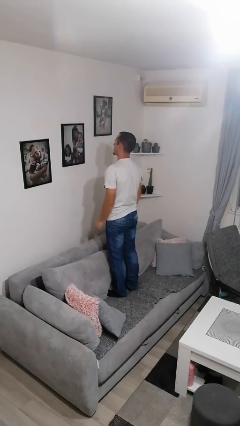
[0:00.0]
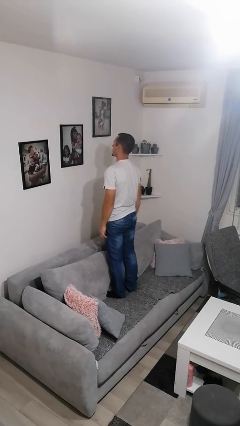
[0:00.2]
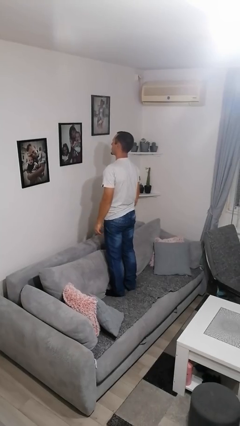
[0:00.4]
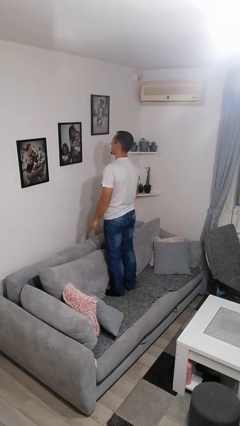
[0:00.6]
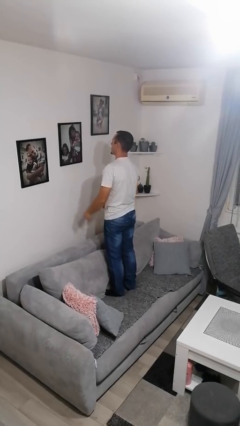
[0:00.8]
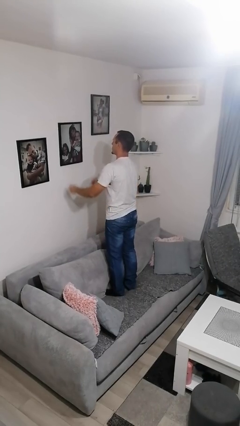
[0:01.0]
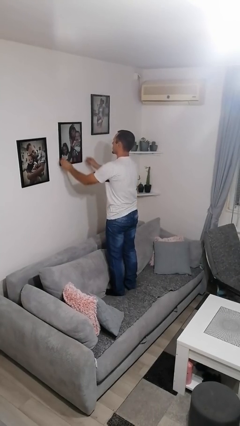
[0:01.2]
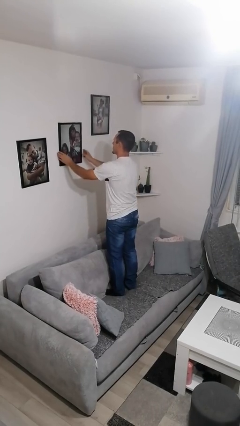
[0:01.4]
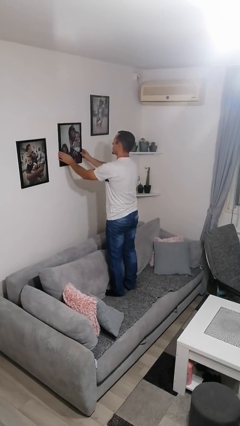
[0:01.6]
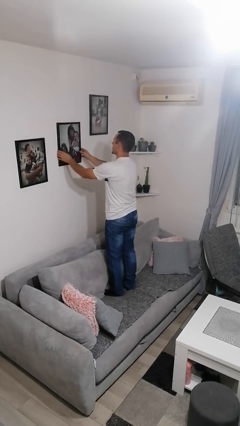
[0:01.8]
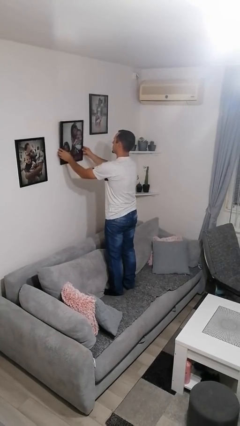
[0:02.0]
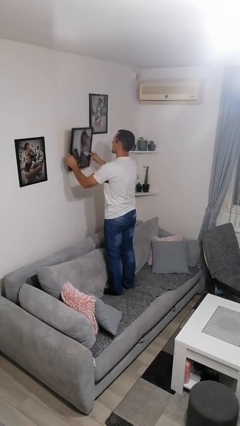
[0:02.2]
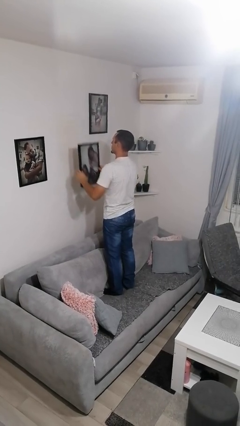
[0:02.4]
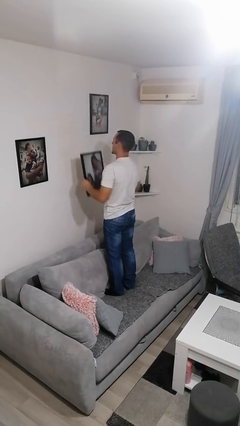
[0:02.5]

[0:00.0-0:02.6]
person takes down picture frame

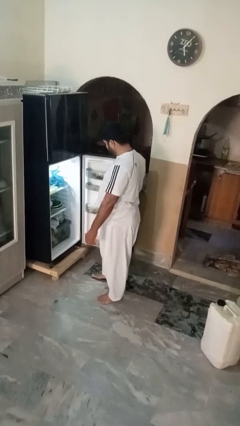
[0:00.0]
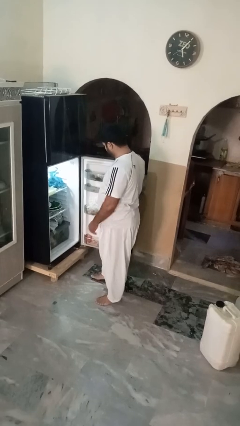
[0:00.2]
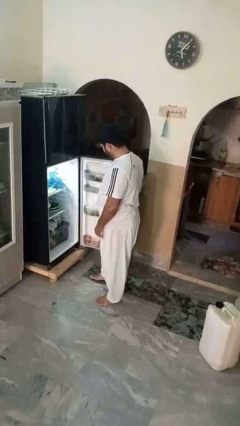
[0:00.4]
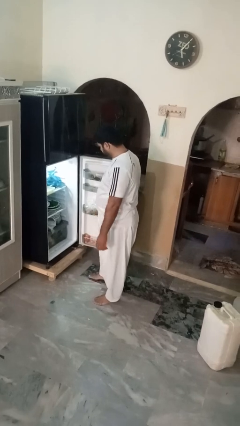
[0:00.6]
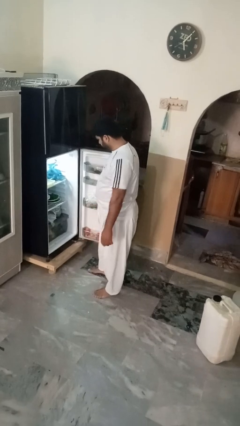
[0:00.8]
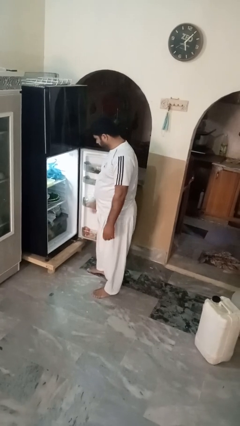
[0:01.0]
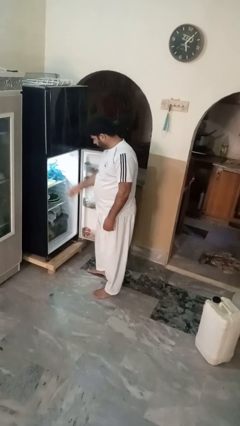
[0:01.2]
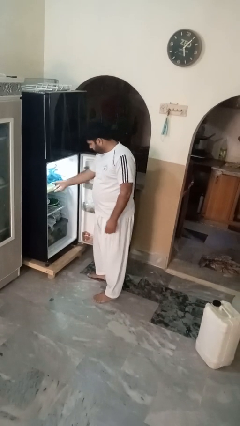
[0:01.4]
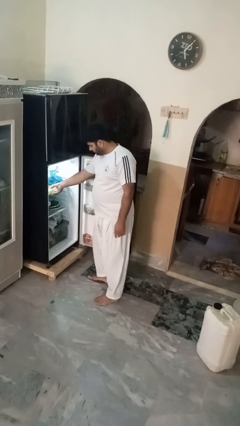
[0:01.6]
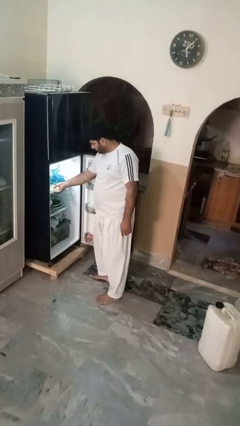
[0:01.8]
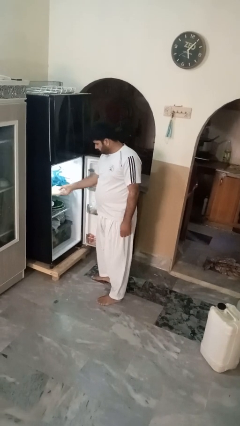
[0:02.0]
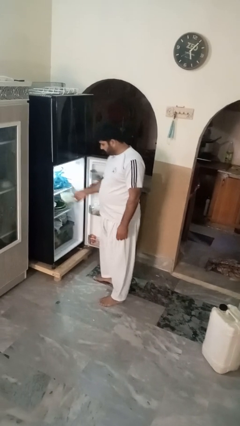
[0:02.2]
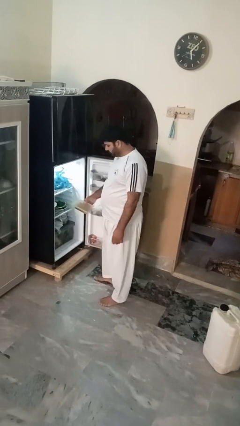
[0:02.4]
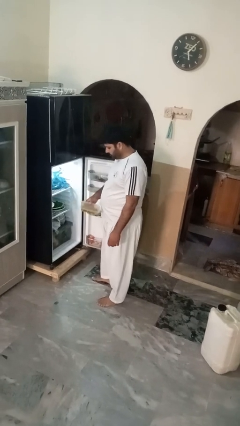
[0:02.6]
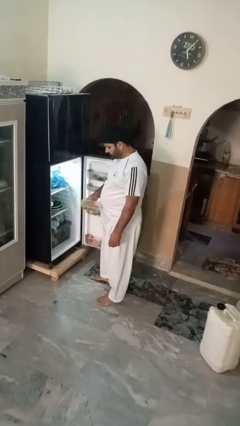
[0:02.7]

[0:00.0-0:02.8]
person takes object from refrigerator

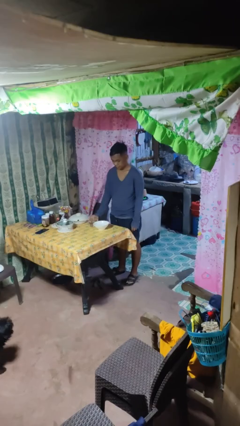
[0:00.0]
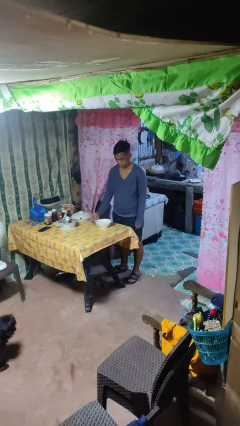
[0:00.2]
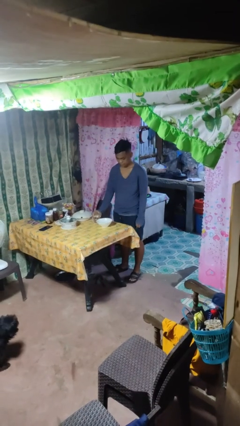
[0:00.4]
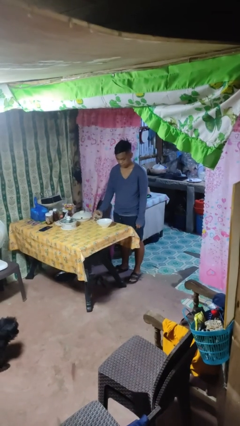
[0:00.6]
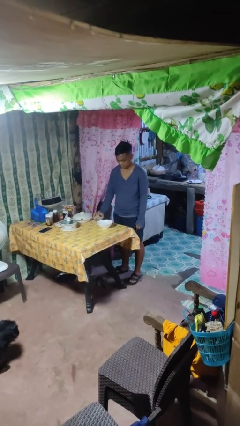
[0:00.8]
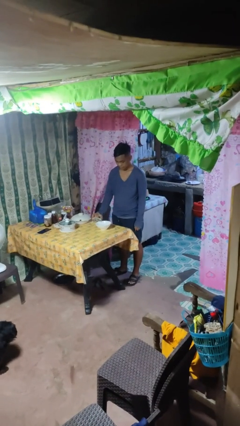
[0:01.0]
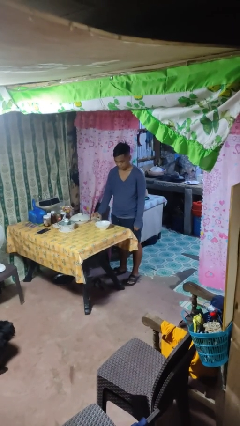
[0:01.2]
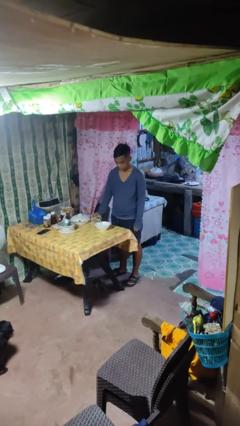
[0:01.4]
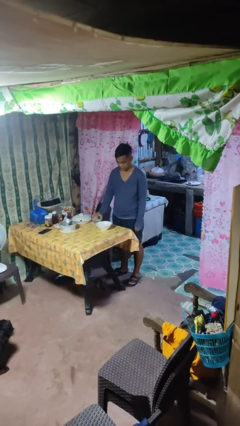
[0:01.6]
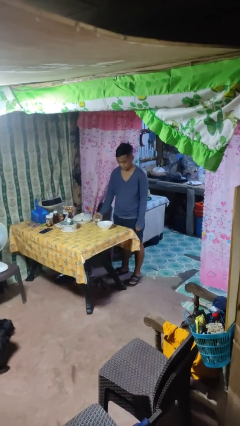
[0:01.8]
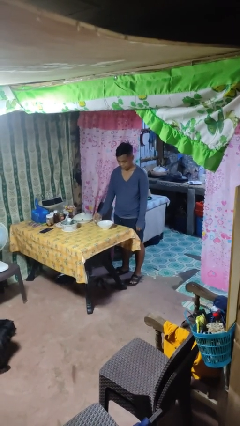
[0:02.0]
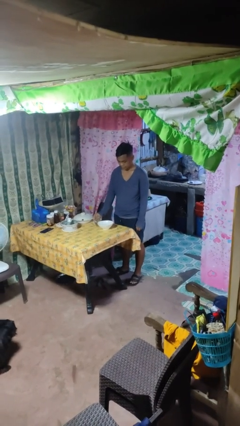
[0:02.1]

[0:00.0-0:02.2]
person pours into bowl

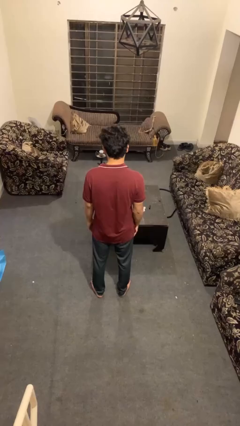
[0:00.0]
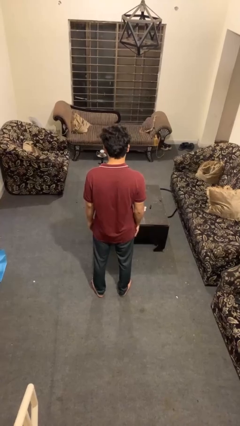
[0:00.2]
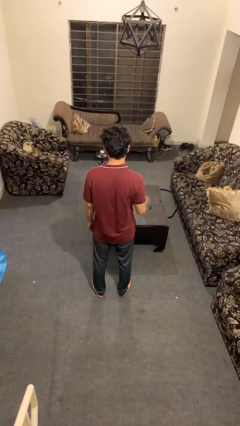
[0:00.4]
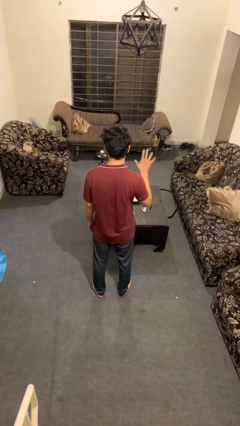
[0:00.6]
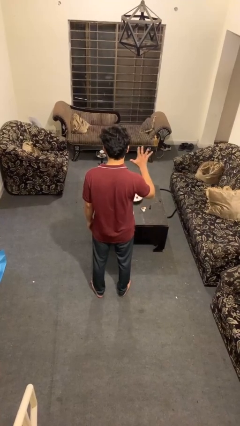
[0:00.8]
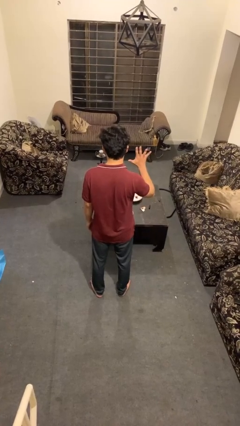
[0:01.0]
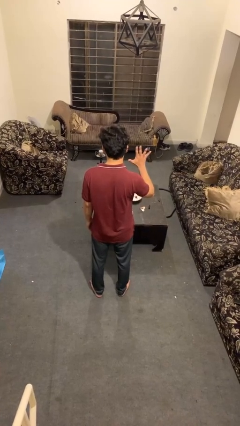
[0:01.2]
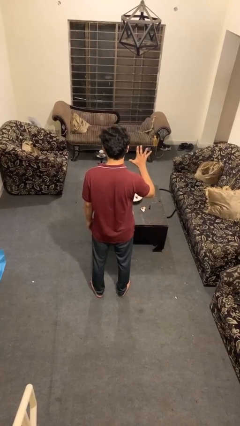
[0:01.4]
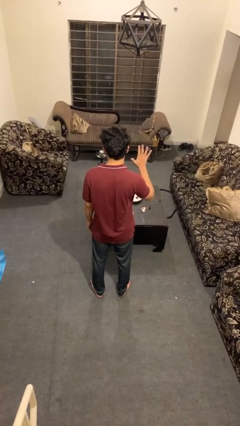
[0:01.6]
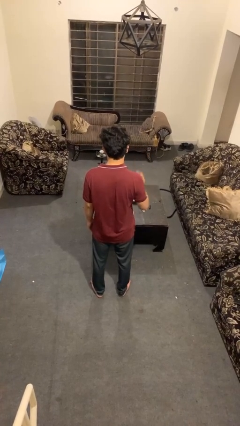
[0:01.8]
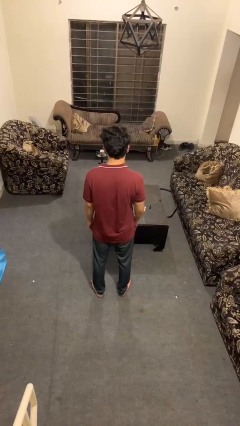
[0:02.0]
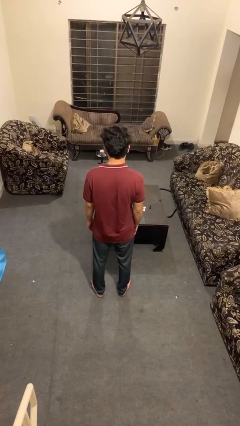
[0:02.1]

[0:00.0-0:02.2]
person gestures number five

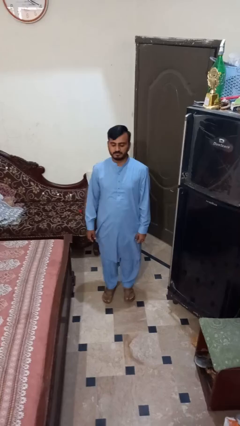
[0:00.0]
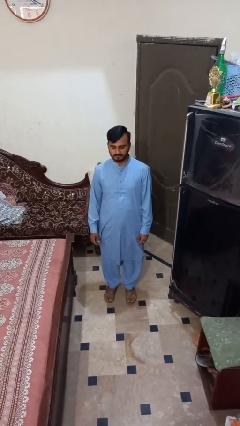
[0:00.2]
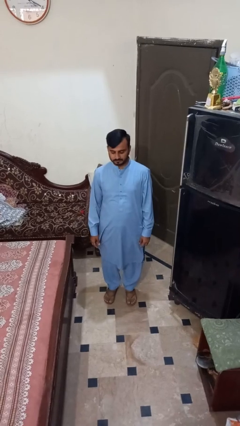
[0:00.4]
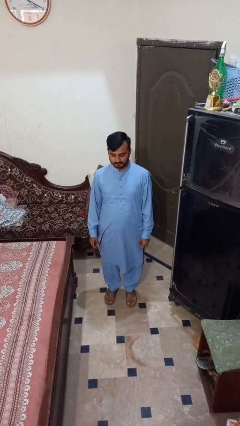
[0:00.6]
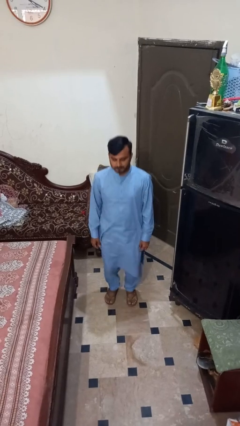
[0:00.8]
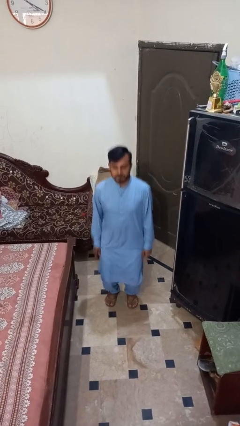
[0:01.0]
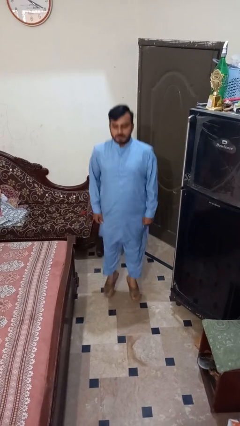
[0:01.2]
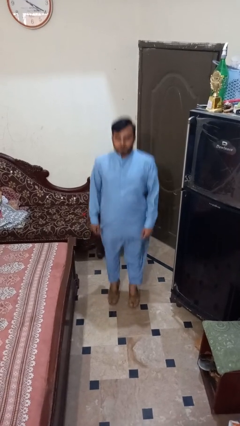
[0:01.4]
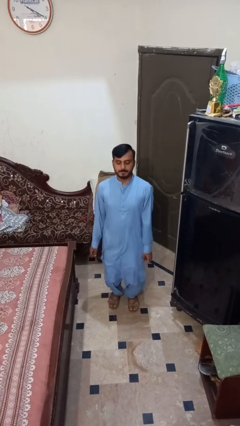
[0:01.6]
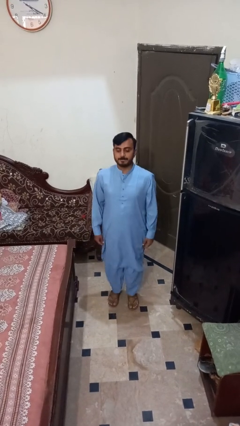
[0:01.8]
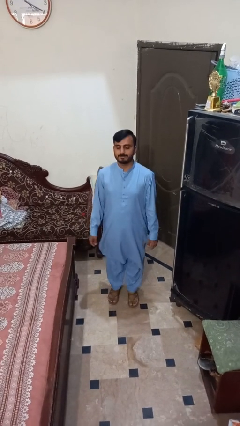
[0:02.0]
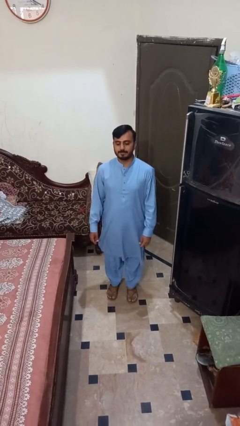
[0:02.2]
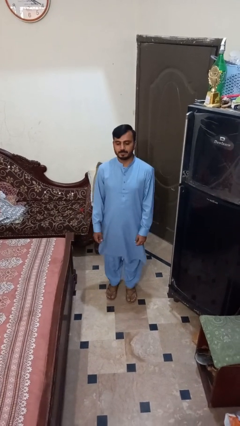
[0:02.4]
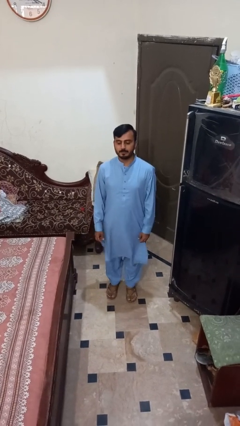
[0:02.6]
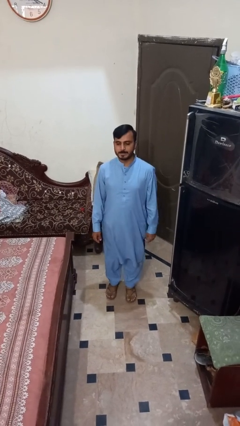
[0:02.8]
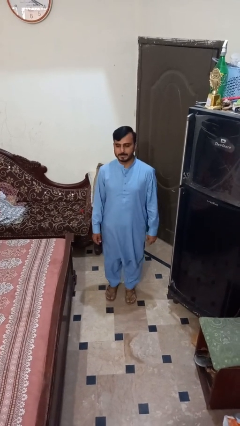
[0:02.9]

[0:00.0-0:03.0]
person jumps

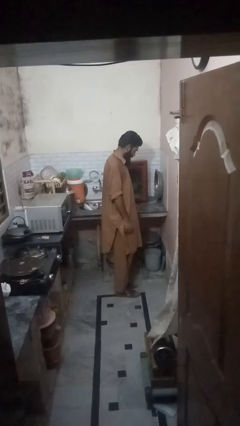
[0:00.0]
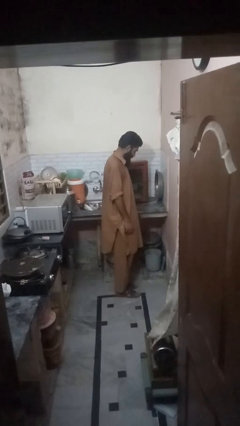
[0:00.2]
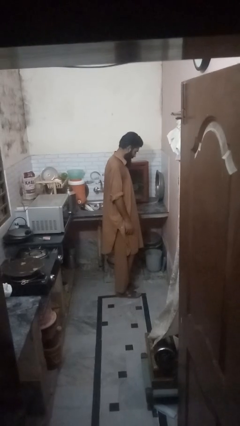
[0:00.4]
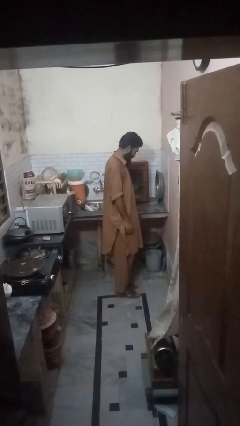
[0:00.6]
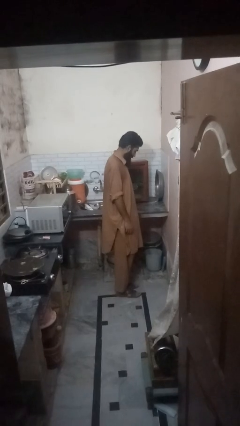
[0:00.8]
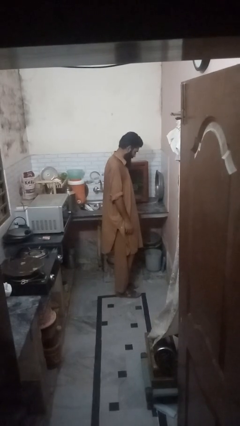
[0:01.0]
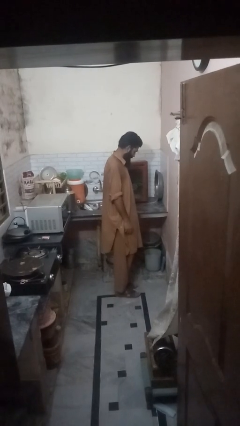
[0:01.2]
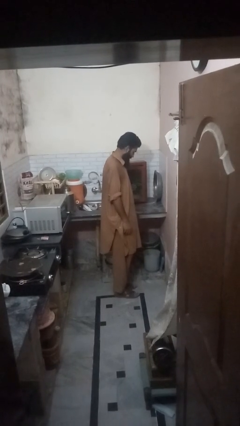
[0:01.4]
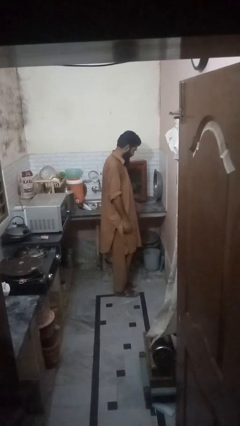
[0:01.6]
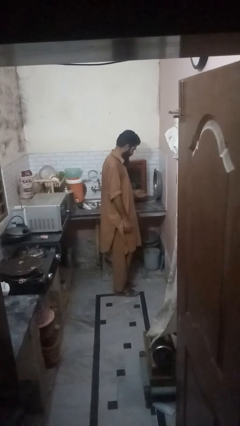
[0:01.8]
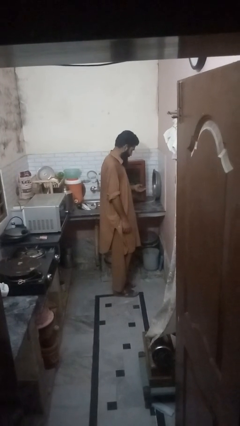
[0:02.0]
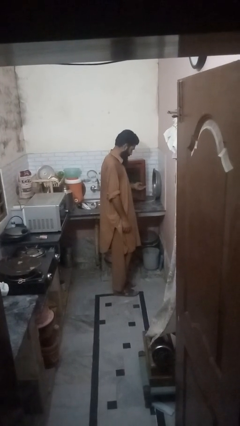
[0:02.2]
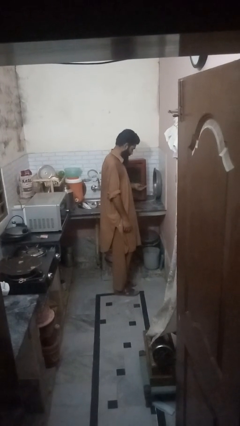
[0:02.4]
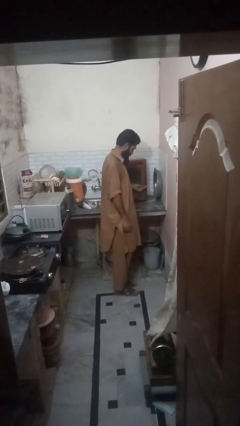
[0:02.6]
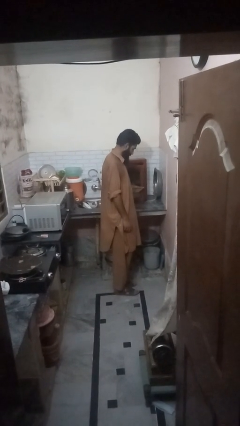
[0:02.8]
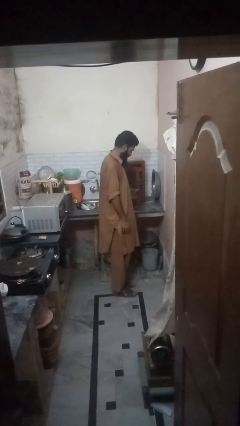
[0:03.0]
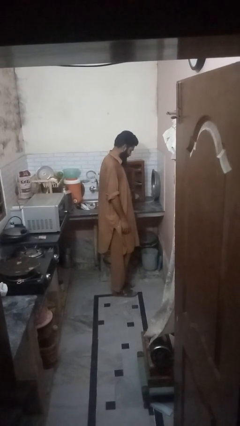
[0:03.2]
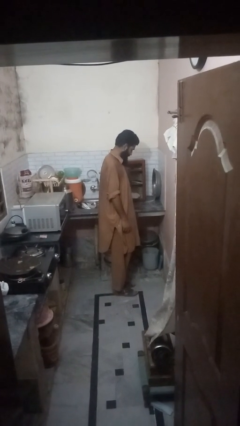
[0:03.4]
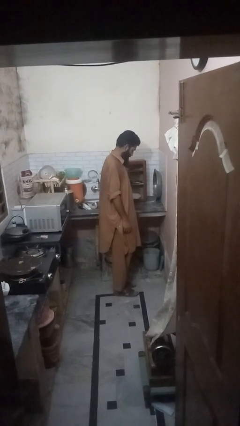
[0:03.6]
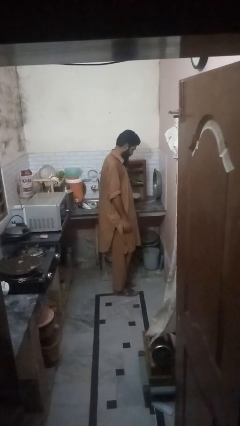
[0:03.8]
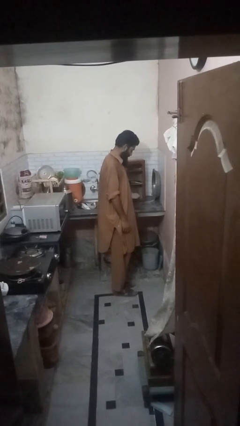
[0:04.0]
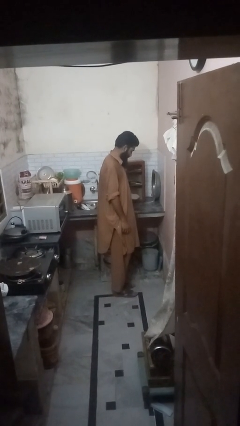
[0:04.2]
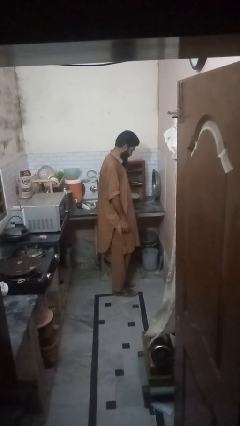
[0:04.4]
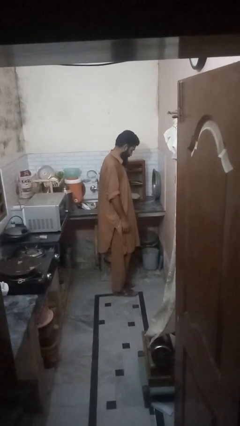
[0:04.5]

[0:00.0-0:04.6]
person opens cabinet

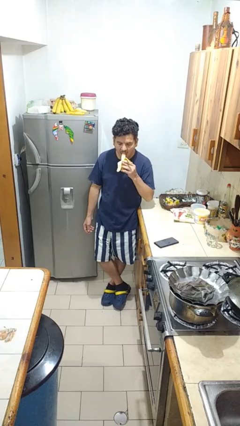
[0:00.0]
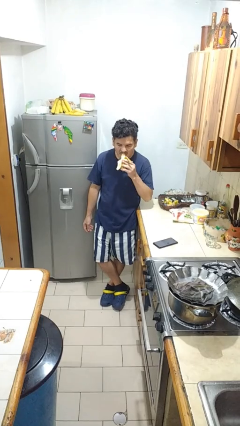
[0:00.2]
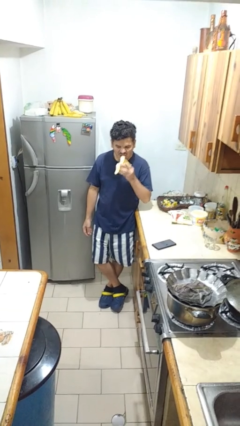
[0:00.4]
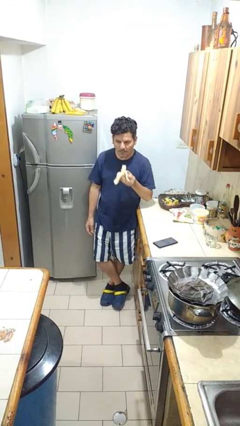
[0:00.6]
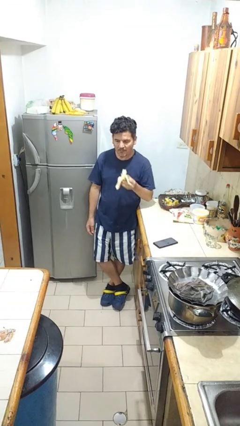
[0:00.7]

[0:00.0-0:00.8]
person eats banana
